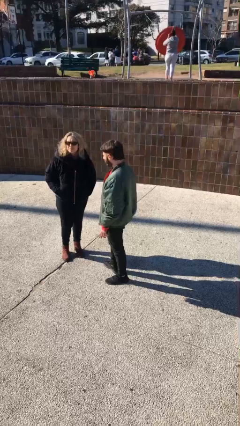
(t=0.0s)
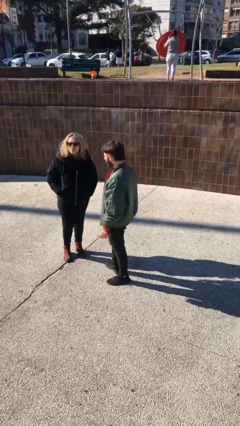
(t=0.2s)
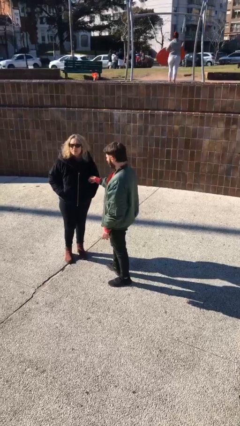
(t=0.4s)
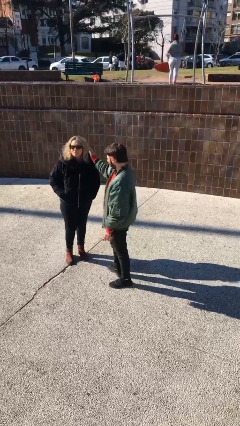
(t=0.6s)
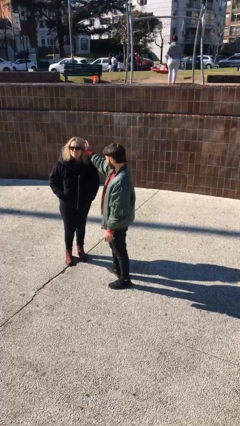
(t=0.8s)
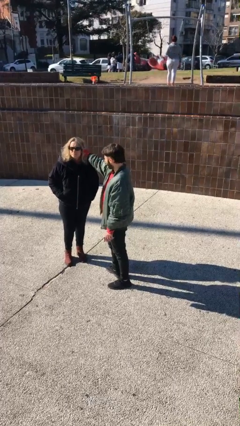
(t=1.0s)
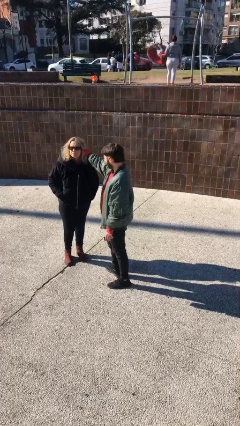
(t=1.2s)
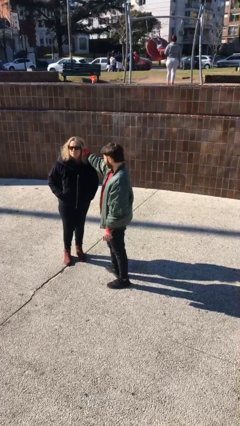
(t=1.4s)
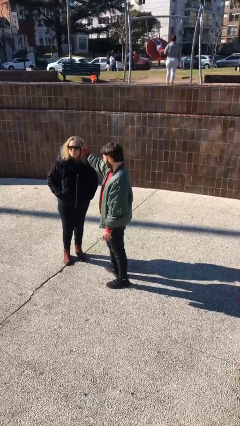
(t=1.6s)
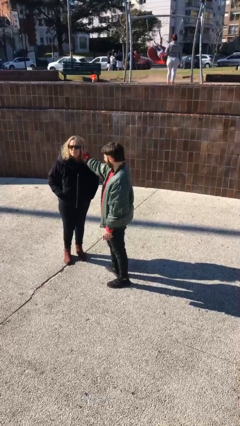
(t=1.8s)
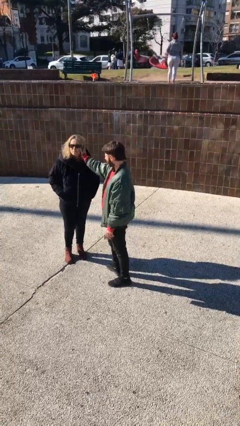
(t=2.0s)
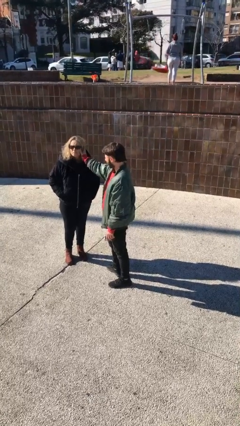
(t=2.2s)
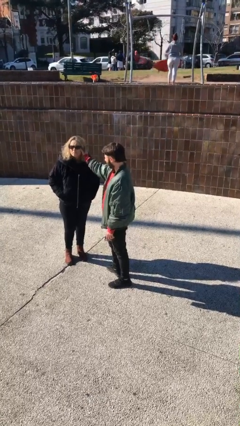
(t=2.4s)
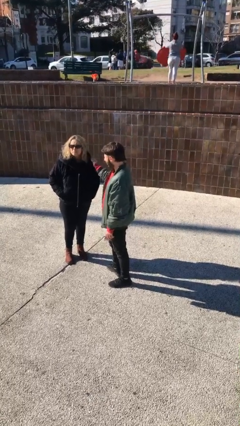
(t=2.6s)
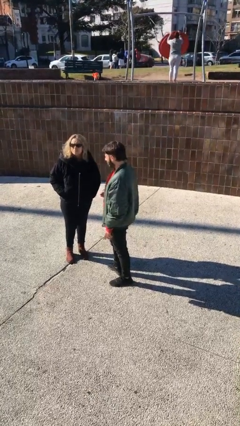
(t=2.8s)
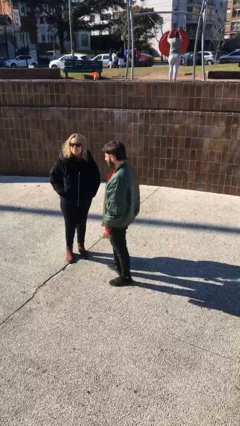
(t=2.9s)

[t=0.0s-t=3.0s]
person touches face of person

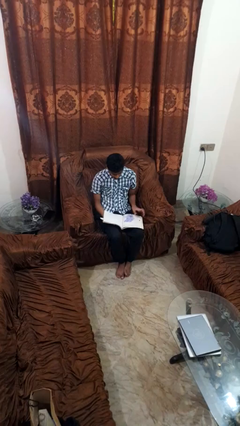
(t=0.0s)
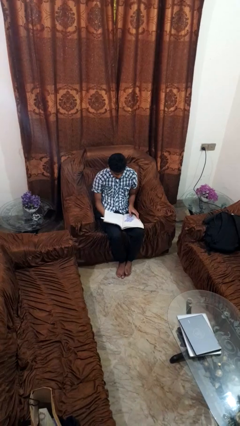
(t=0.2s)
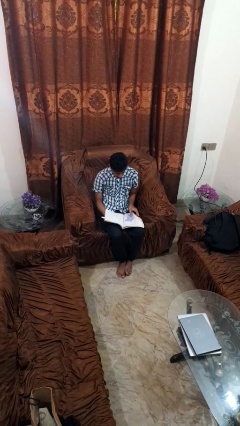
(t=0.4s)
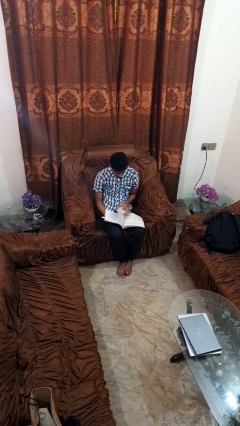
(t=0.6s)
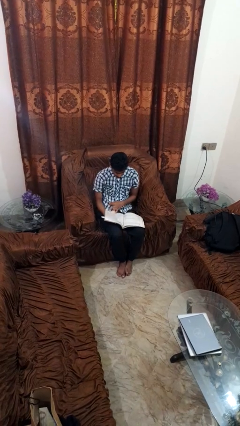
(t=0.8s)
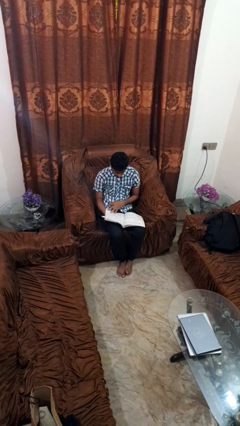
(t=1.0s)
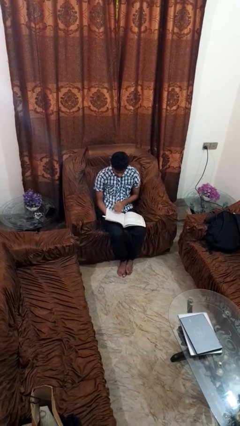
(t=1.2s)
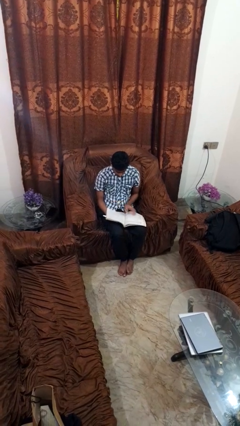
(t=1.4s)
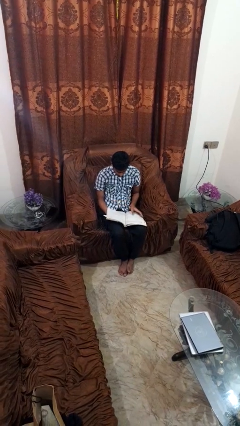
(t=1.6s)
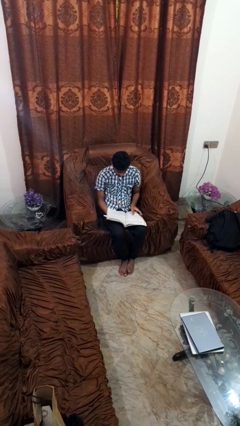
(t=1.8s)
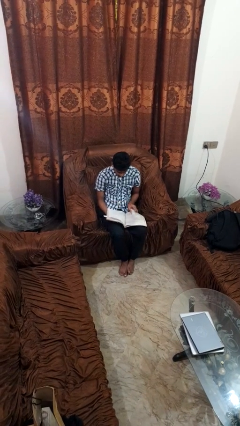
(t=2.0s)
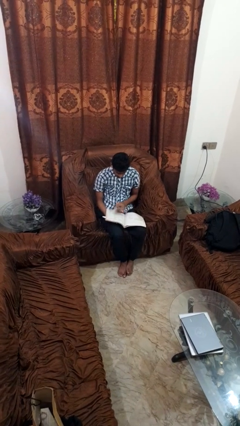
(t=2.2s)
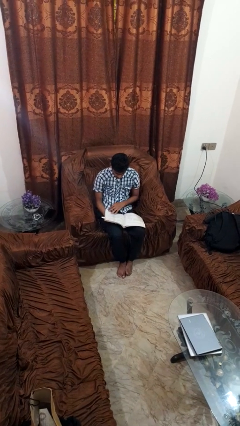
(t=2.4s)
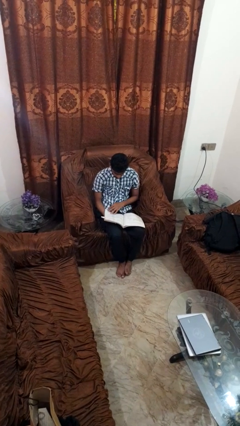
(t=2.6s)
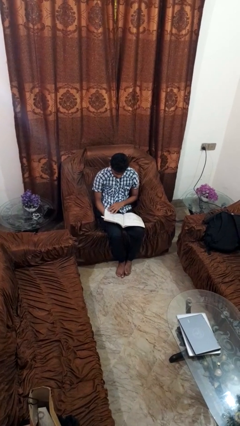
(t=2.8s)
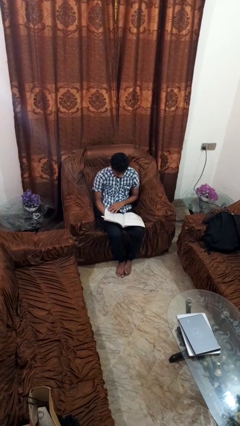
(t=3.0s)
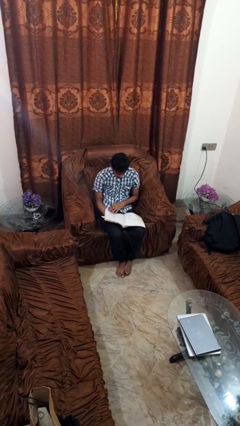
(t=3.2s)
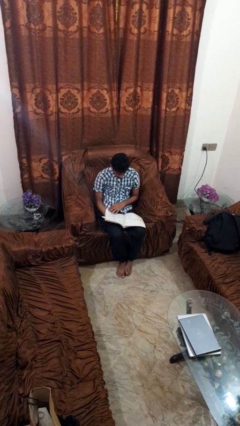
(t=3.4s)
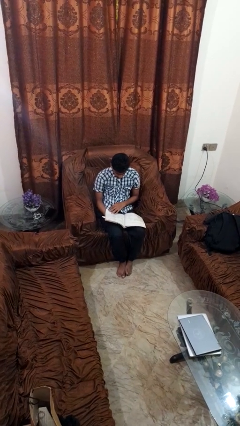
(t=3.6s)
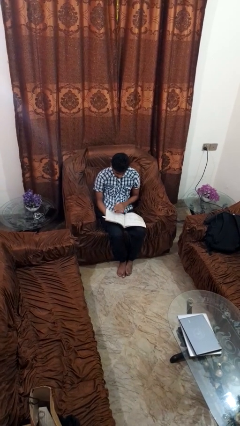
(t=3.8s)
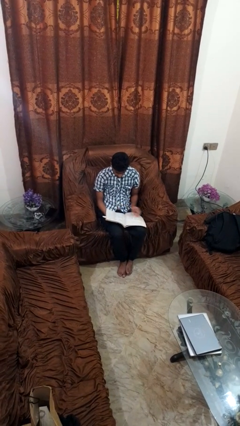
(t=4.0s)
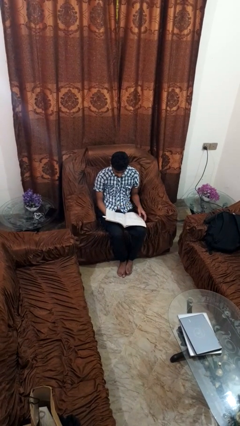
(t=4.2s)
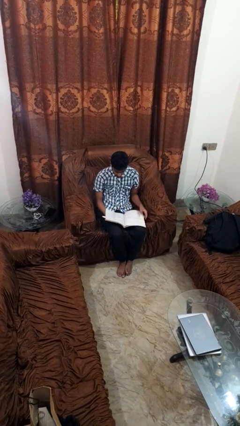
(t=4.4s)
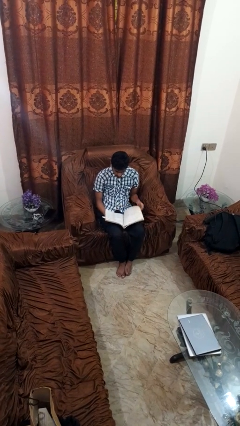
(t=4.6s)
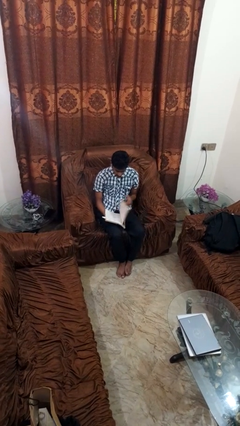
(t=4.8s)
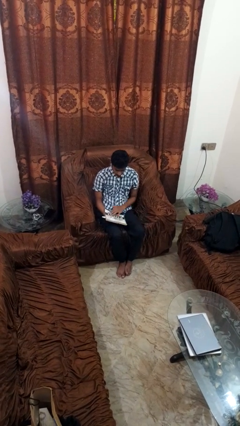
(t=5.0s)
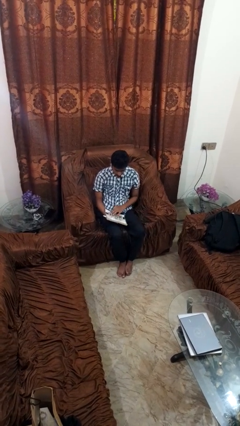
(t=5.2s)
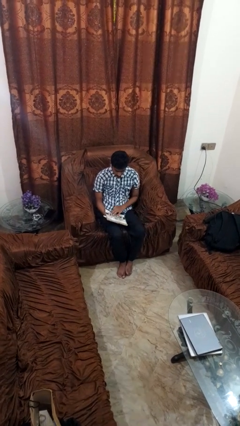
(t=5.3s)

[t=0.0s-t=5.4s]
person reads magazine

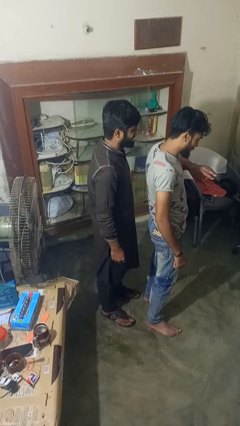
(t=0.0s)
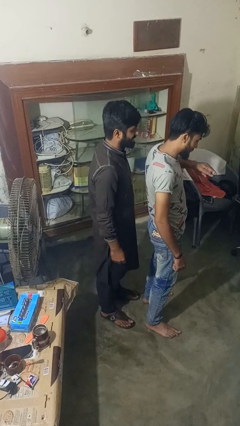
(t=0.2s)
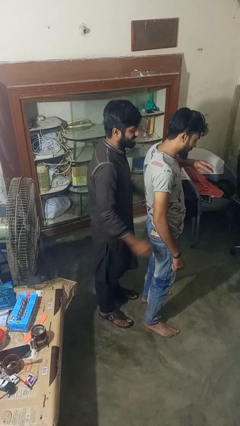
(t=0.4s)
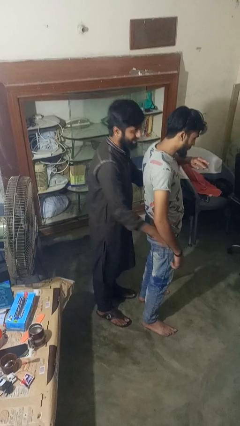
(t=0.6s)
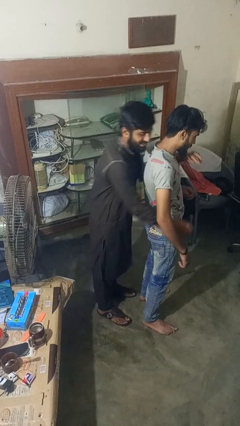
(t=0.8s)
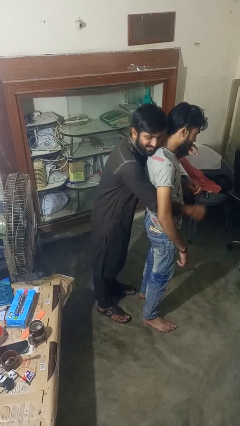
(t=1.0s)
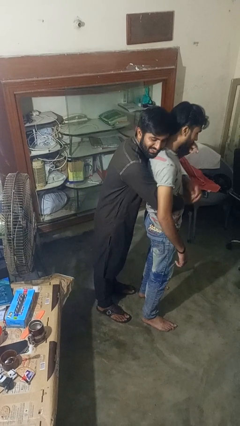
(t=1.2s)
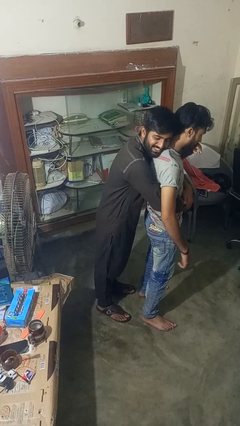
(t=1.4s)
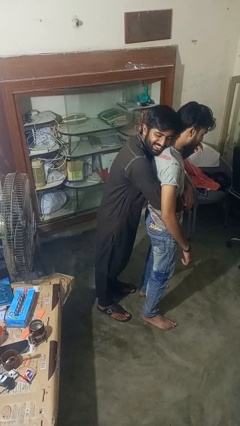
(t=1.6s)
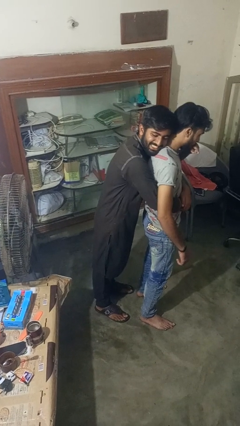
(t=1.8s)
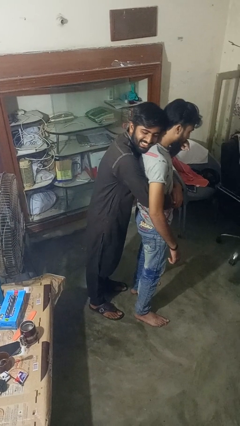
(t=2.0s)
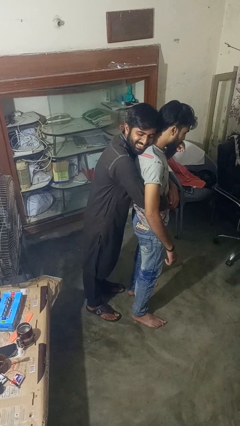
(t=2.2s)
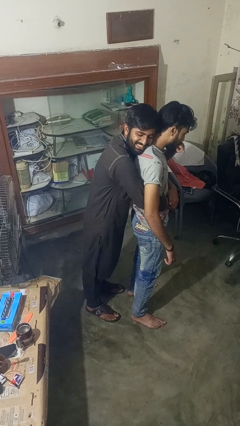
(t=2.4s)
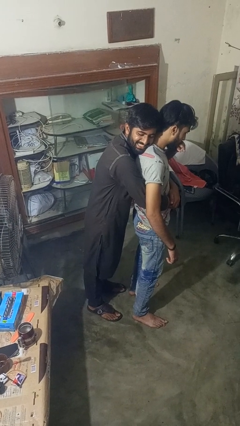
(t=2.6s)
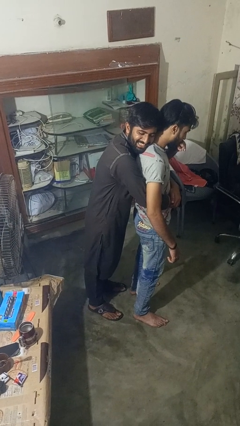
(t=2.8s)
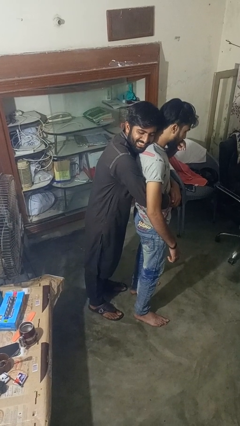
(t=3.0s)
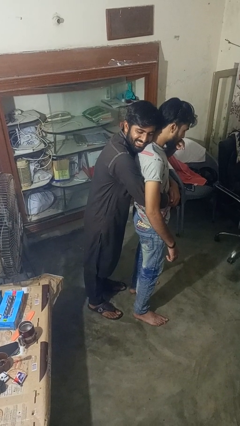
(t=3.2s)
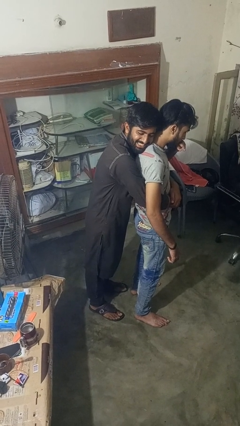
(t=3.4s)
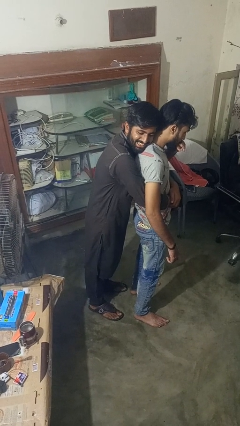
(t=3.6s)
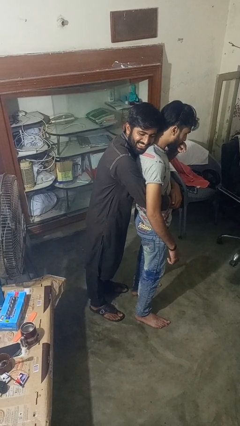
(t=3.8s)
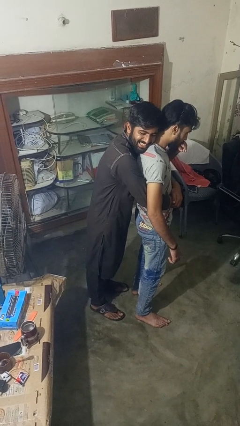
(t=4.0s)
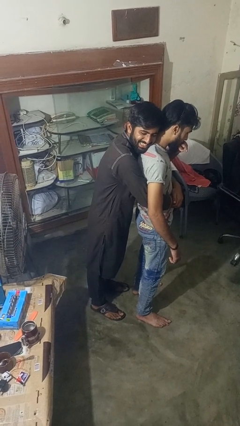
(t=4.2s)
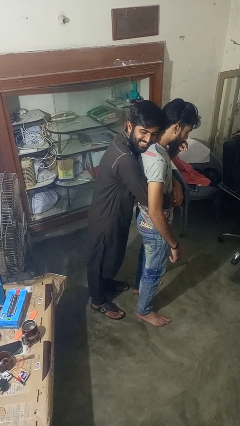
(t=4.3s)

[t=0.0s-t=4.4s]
person hugs person from behind

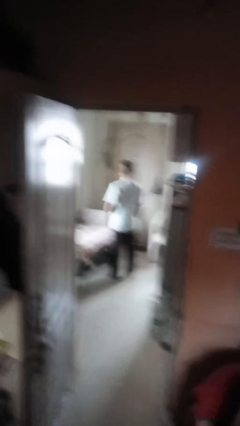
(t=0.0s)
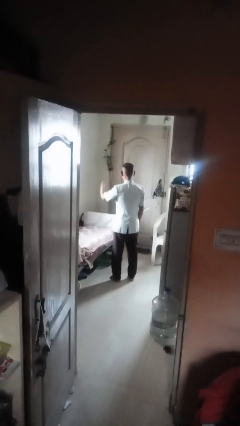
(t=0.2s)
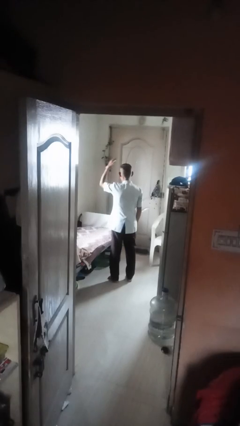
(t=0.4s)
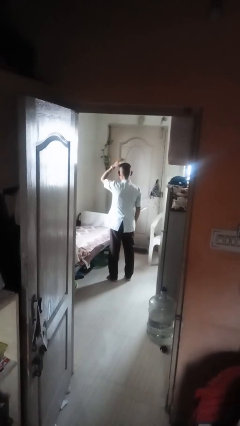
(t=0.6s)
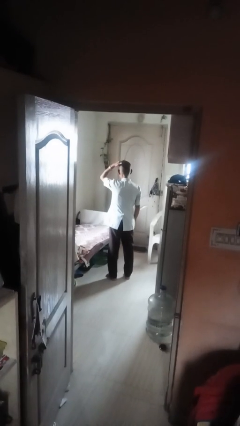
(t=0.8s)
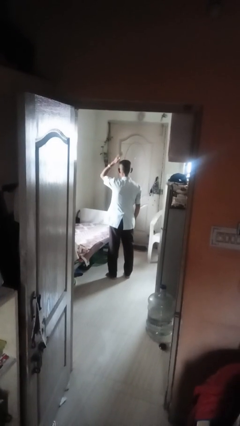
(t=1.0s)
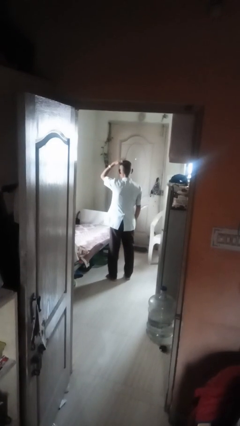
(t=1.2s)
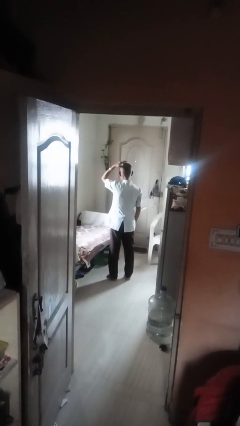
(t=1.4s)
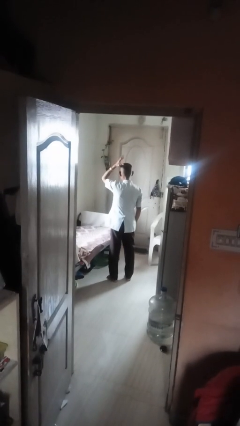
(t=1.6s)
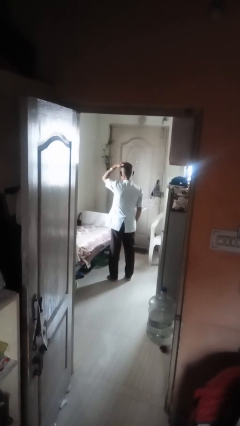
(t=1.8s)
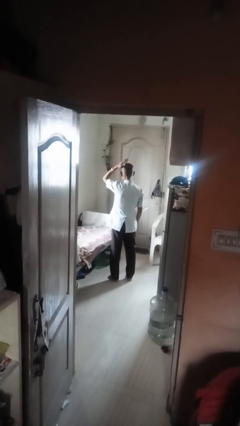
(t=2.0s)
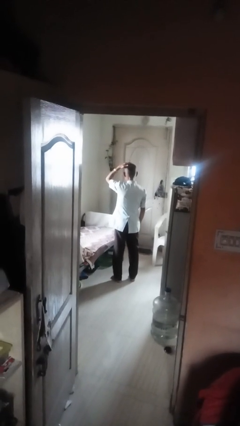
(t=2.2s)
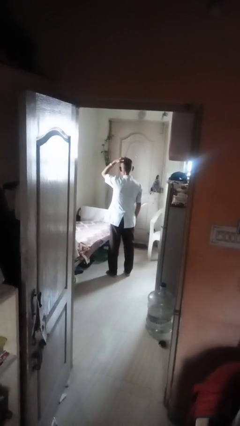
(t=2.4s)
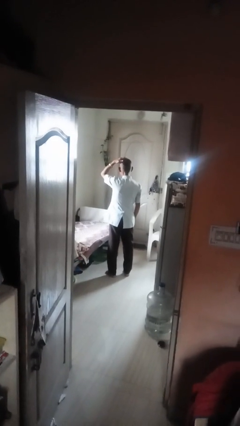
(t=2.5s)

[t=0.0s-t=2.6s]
person pats head

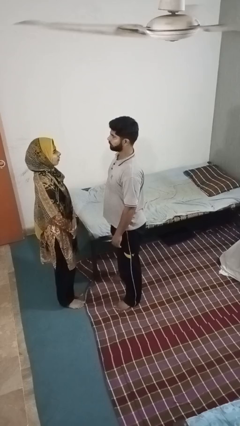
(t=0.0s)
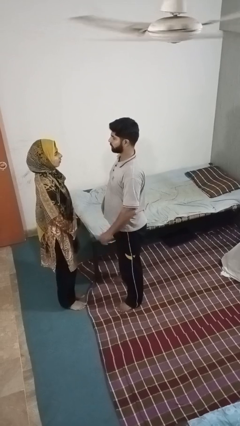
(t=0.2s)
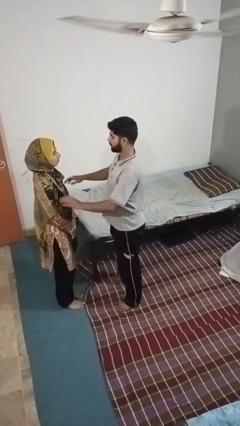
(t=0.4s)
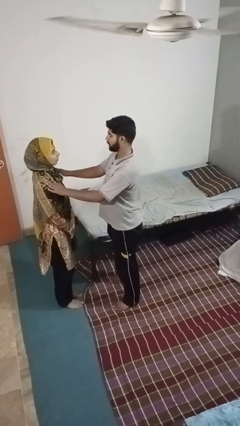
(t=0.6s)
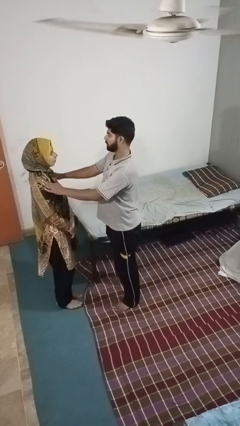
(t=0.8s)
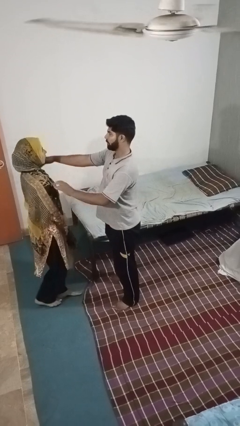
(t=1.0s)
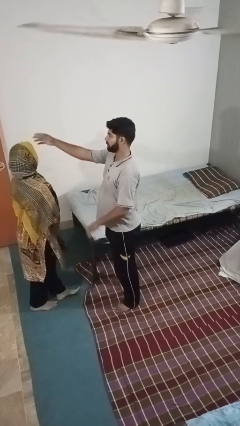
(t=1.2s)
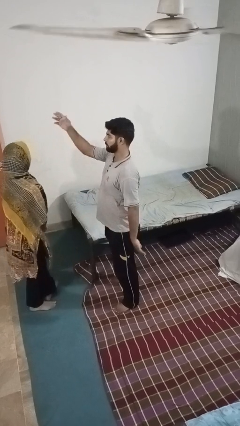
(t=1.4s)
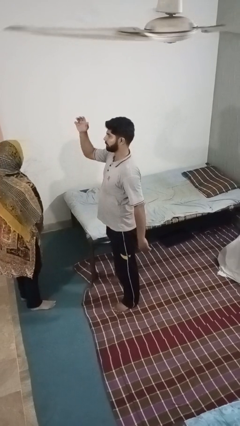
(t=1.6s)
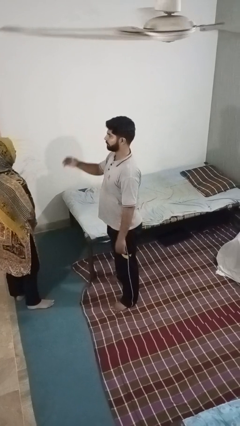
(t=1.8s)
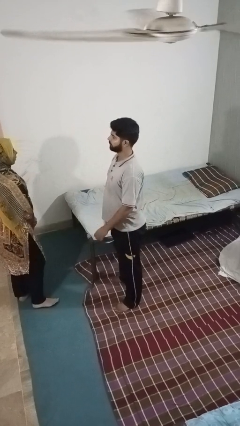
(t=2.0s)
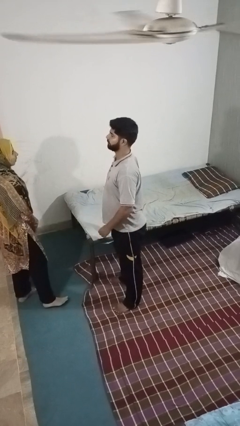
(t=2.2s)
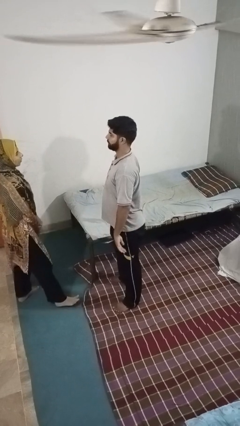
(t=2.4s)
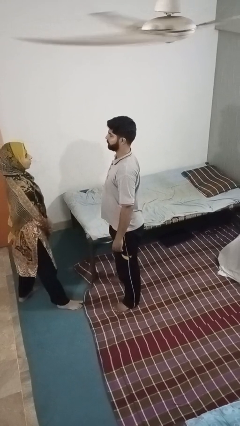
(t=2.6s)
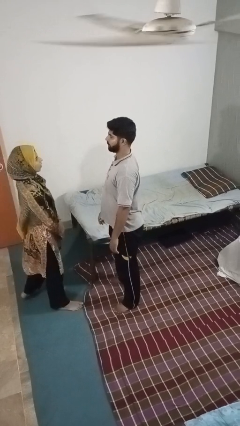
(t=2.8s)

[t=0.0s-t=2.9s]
person shoves person
